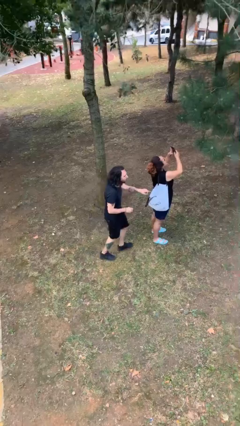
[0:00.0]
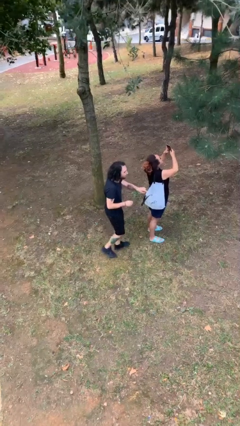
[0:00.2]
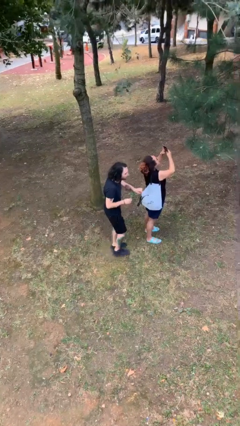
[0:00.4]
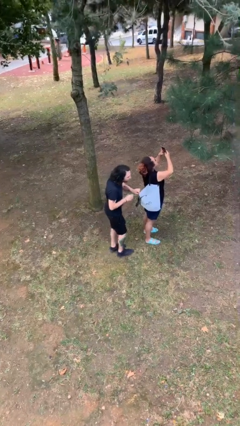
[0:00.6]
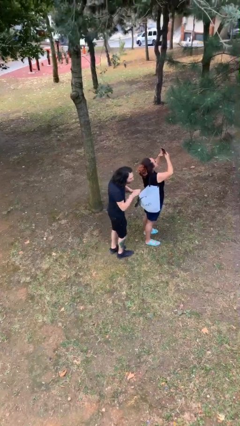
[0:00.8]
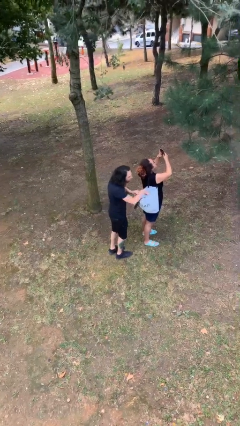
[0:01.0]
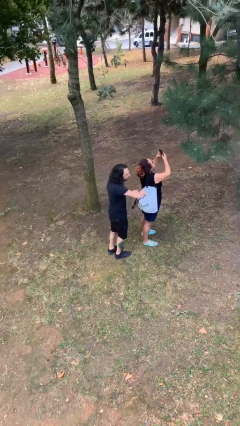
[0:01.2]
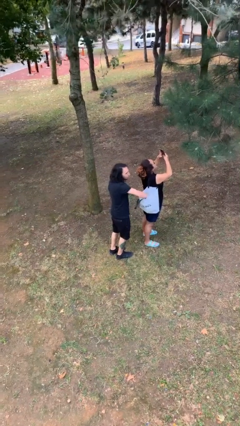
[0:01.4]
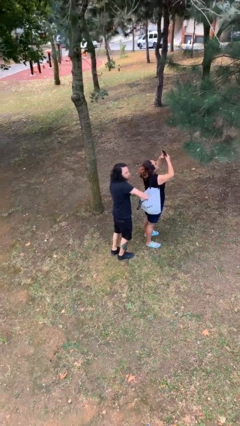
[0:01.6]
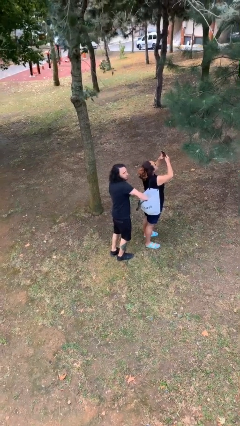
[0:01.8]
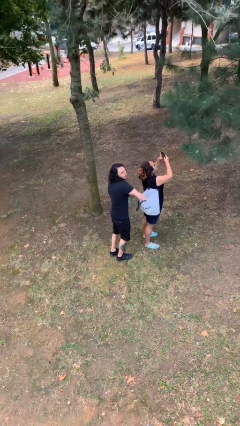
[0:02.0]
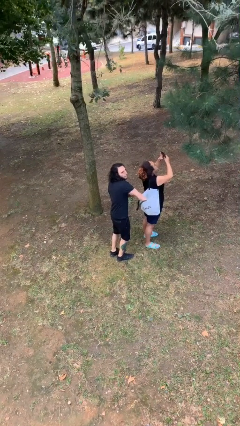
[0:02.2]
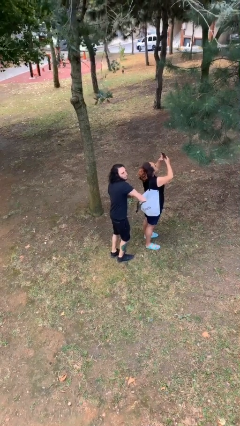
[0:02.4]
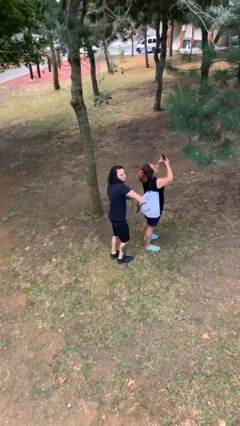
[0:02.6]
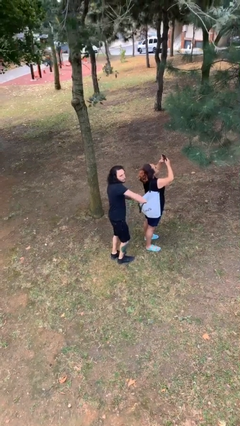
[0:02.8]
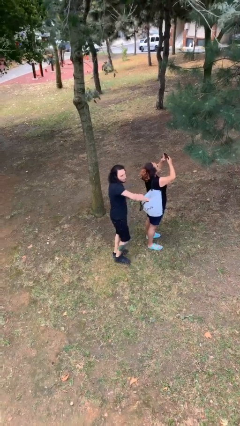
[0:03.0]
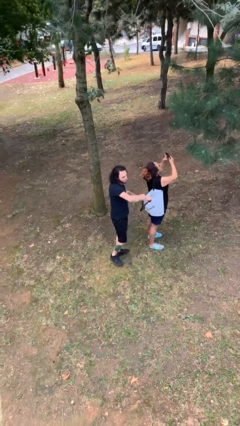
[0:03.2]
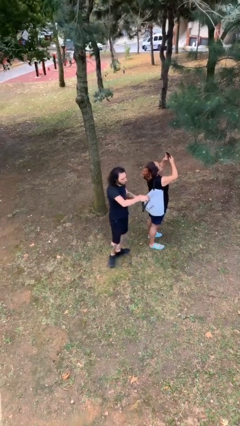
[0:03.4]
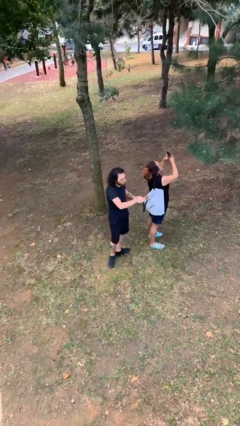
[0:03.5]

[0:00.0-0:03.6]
person steals object from person

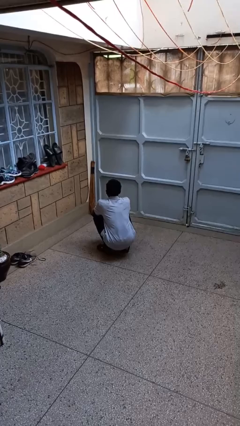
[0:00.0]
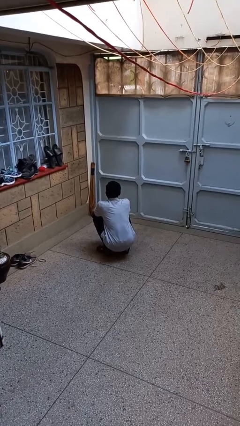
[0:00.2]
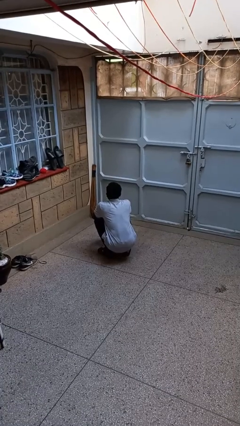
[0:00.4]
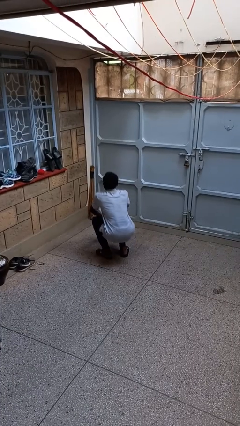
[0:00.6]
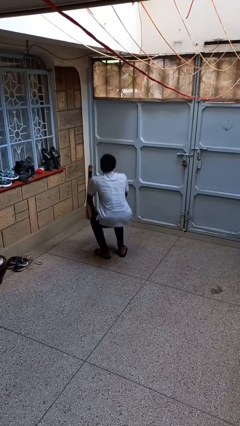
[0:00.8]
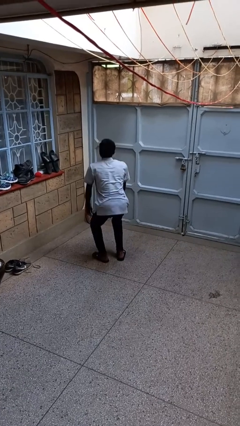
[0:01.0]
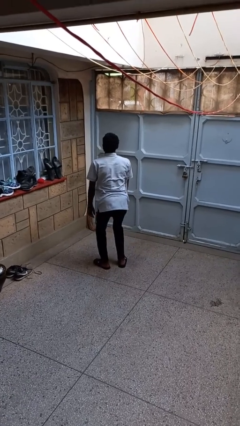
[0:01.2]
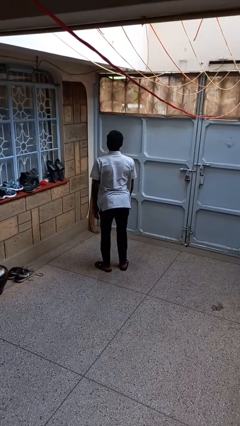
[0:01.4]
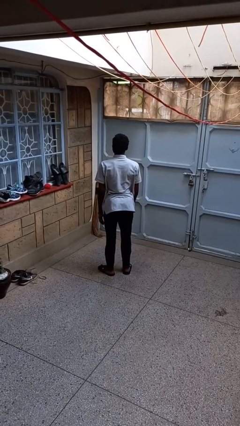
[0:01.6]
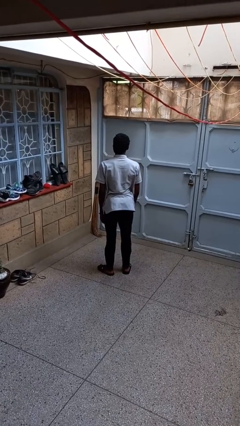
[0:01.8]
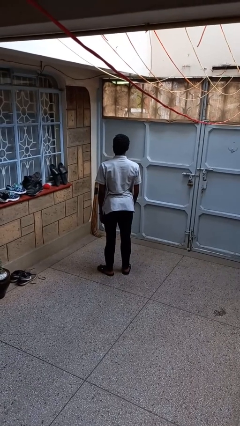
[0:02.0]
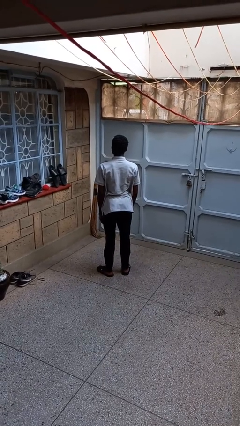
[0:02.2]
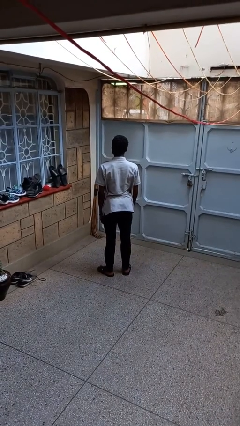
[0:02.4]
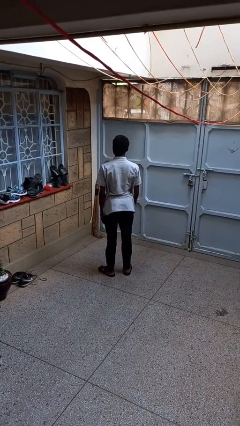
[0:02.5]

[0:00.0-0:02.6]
person stands up

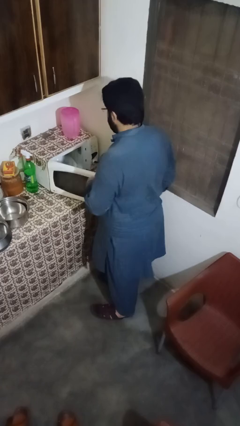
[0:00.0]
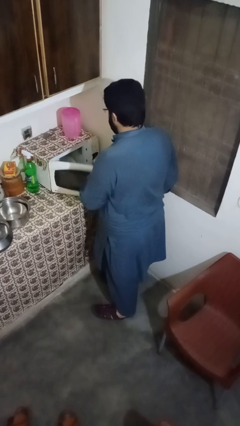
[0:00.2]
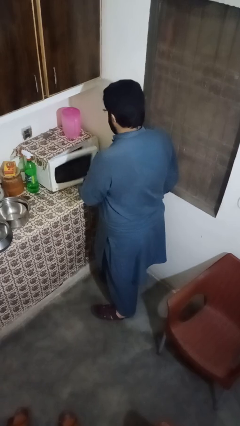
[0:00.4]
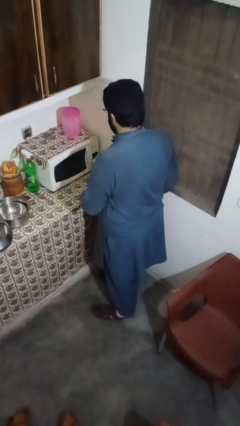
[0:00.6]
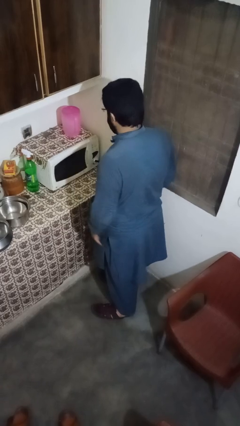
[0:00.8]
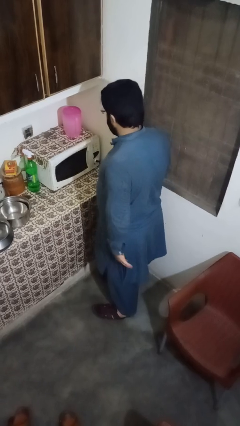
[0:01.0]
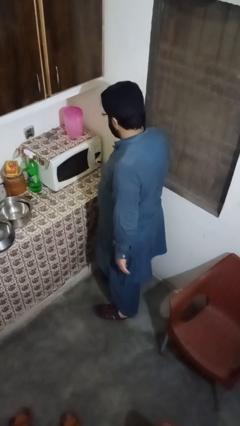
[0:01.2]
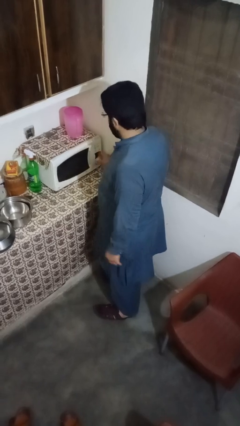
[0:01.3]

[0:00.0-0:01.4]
person closes microwave

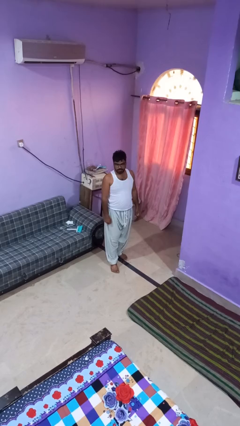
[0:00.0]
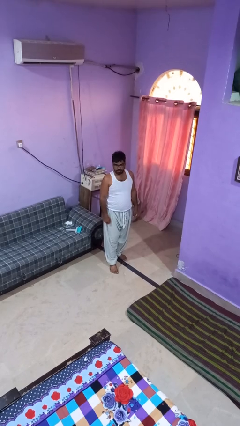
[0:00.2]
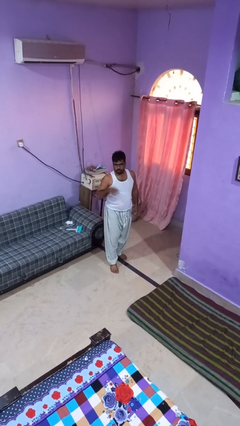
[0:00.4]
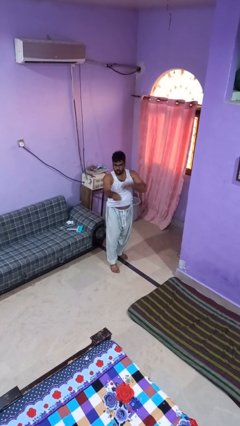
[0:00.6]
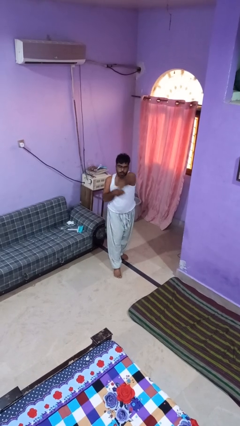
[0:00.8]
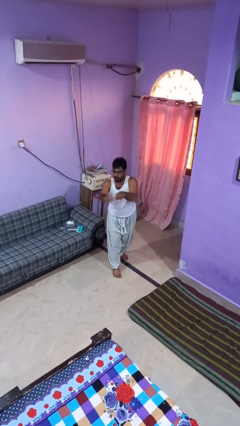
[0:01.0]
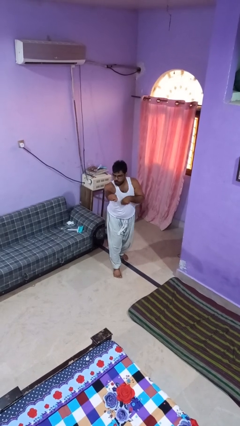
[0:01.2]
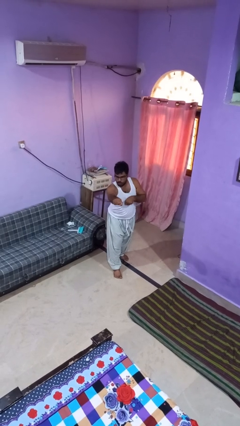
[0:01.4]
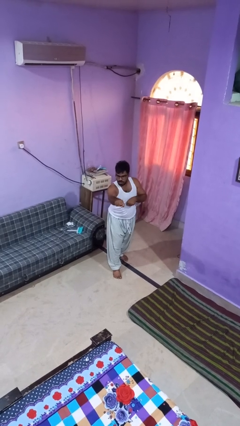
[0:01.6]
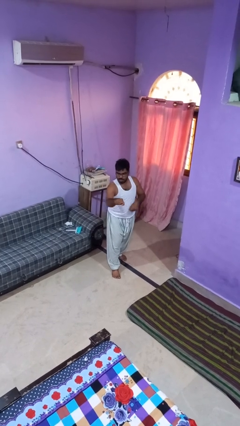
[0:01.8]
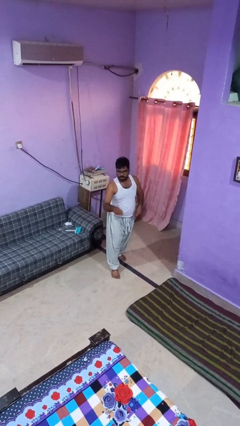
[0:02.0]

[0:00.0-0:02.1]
person punches

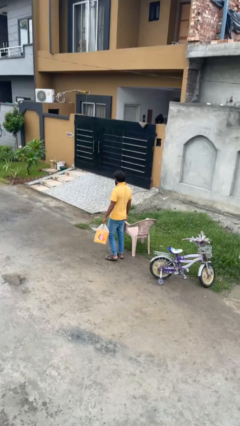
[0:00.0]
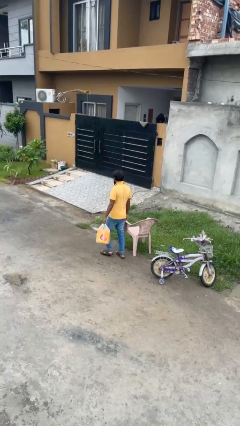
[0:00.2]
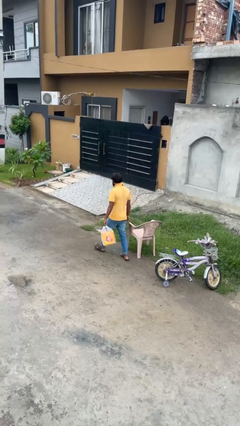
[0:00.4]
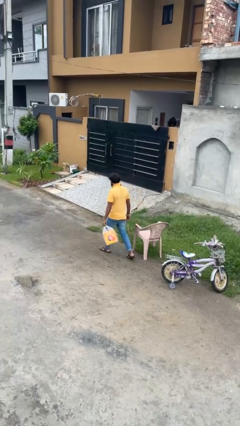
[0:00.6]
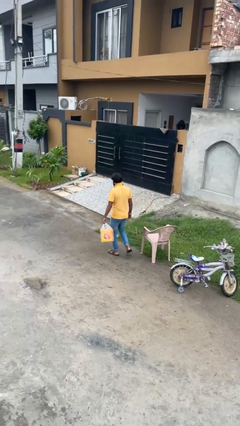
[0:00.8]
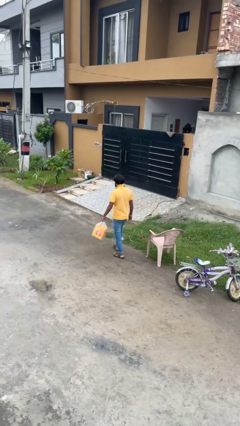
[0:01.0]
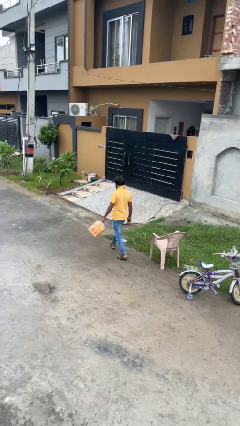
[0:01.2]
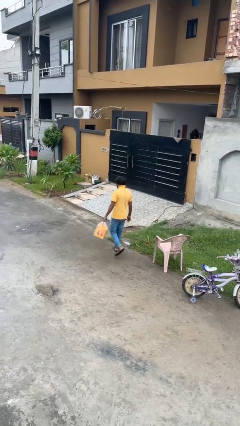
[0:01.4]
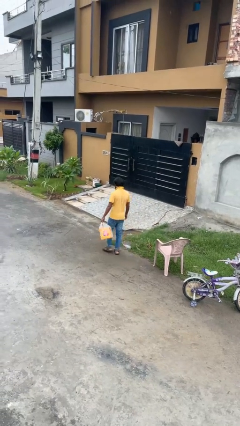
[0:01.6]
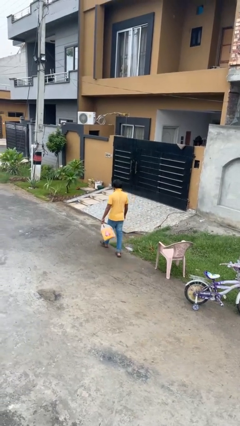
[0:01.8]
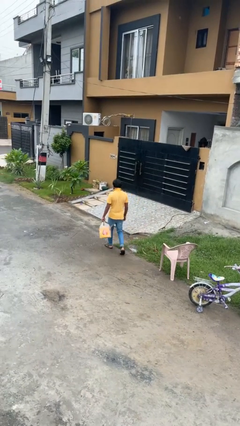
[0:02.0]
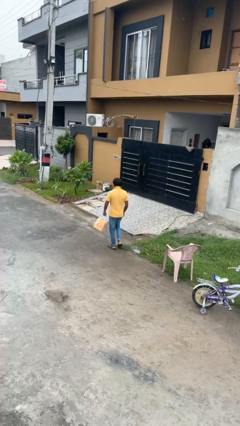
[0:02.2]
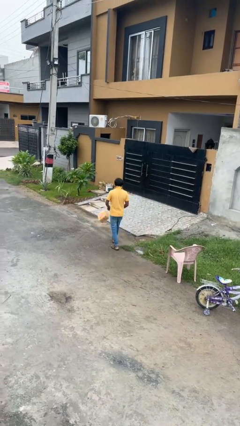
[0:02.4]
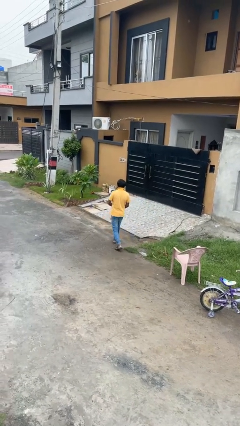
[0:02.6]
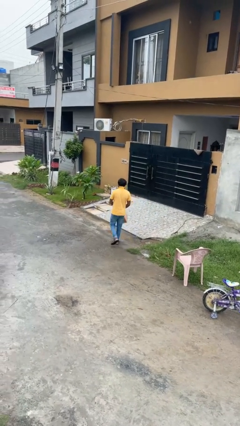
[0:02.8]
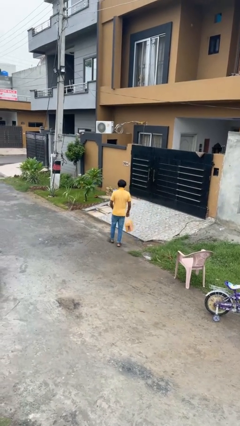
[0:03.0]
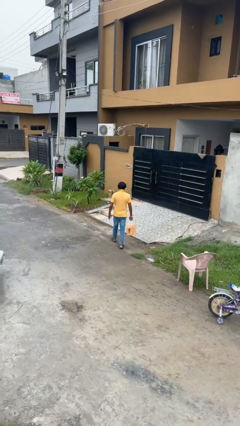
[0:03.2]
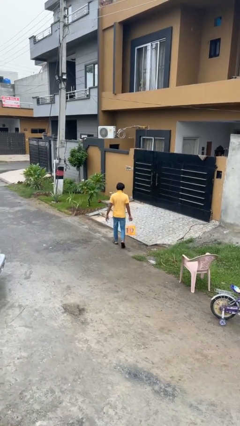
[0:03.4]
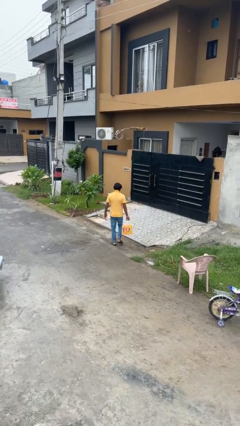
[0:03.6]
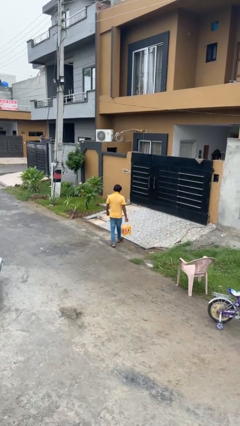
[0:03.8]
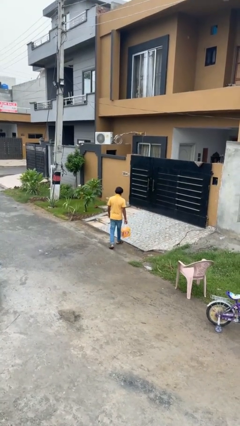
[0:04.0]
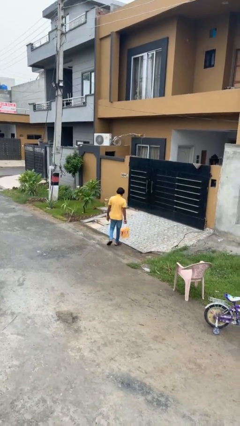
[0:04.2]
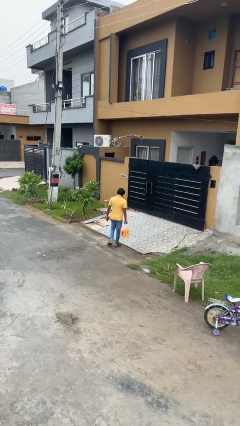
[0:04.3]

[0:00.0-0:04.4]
person carries groceries

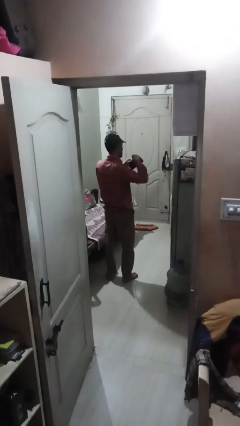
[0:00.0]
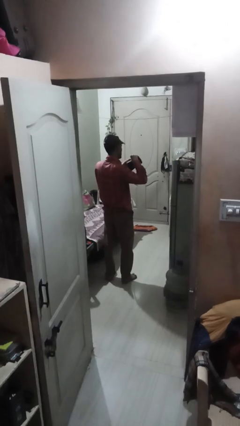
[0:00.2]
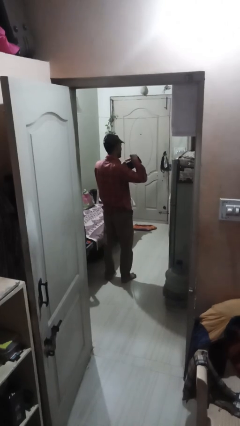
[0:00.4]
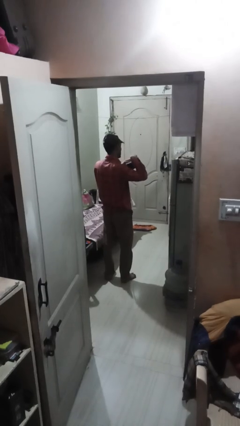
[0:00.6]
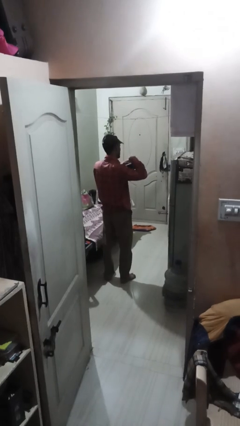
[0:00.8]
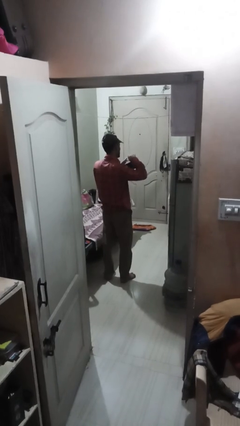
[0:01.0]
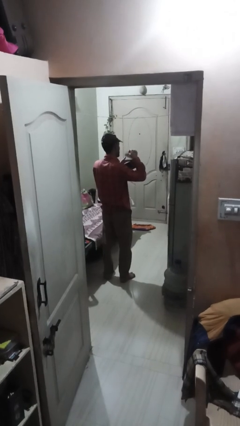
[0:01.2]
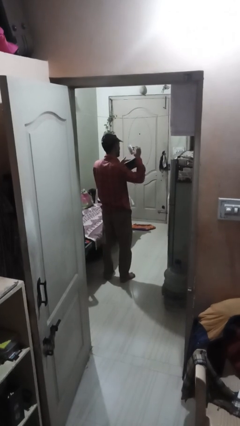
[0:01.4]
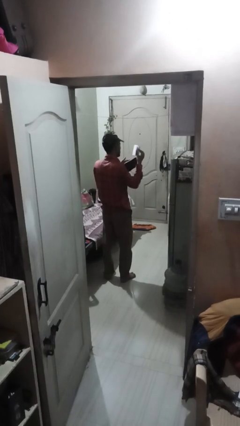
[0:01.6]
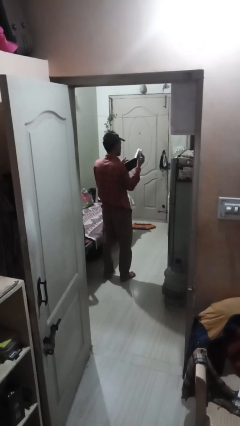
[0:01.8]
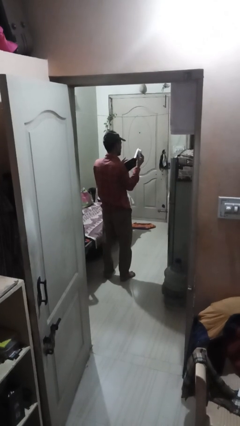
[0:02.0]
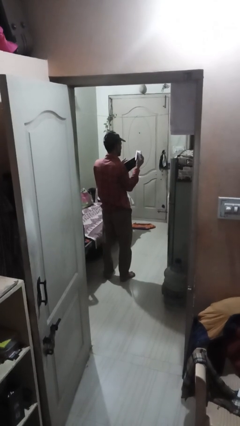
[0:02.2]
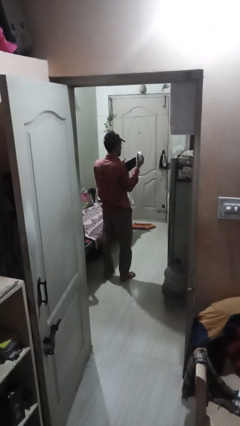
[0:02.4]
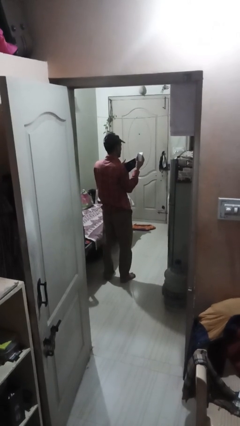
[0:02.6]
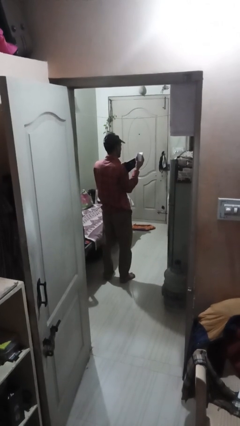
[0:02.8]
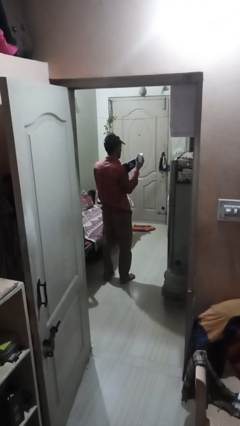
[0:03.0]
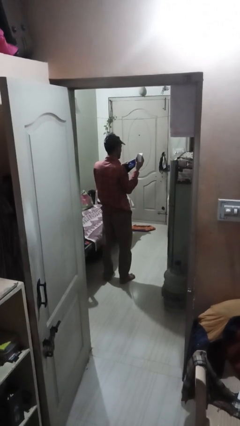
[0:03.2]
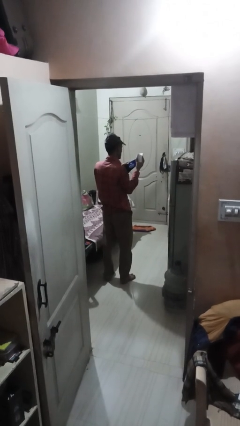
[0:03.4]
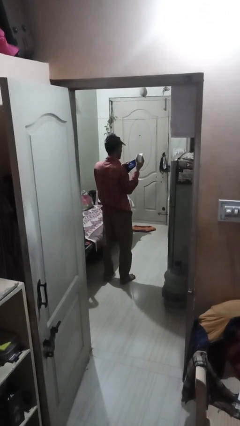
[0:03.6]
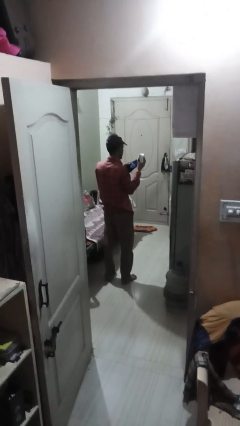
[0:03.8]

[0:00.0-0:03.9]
person takes object from purse
